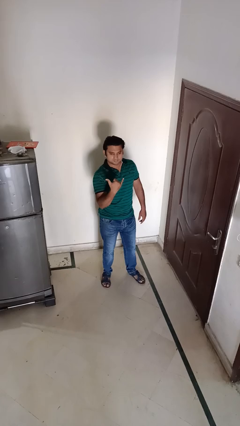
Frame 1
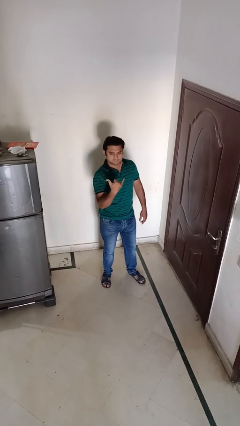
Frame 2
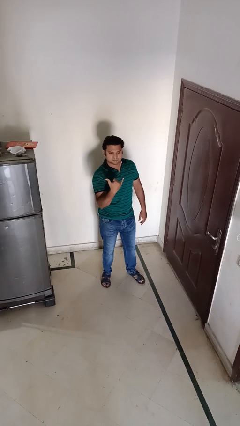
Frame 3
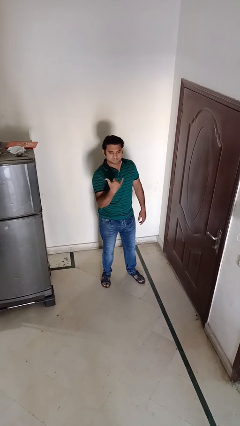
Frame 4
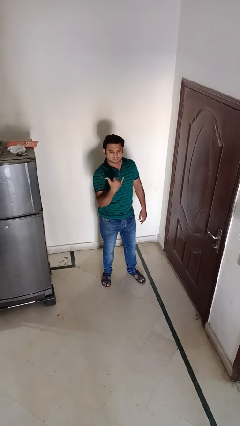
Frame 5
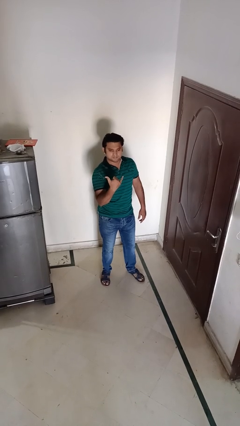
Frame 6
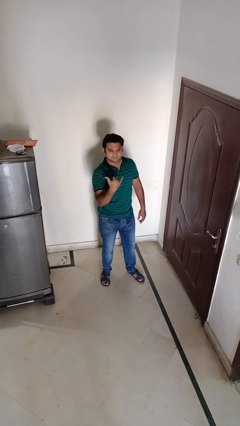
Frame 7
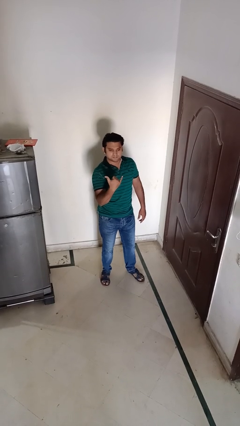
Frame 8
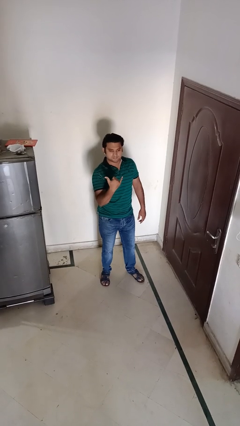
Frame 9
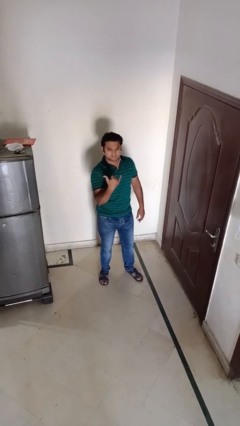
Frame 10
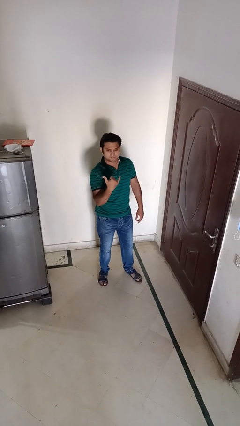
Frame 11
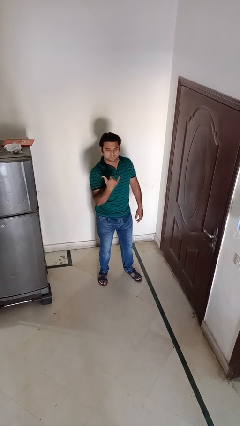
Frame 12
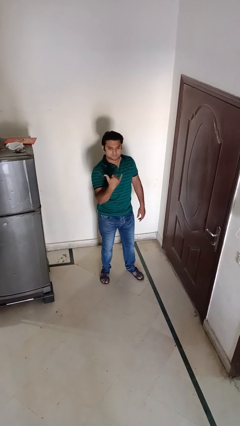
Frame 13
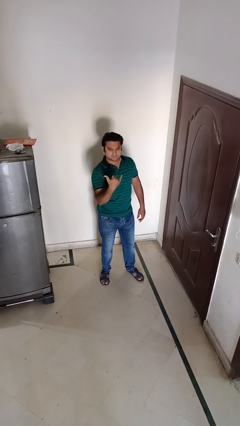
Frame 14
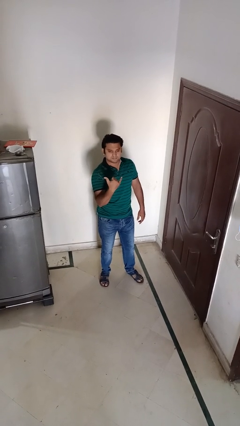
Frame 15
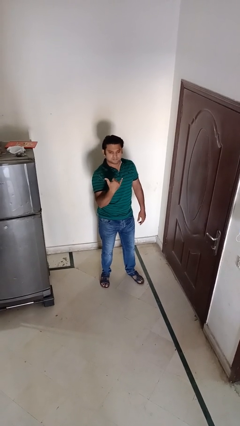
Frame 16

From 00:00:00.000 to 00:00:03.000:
person gestures hang loose

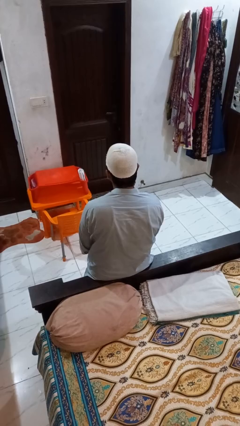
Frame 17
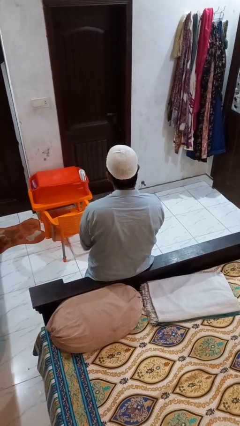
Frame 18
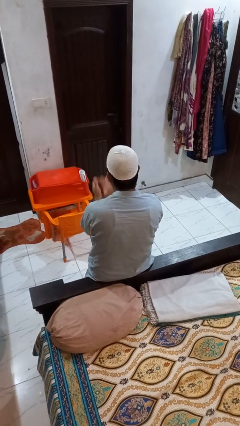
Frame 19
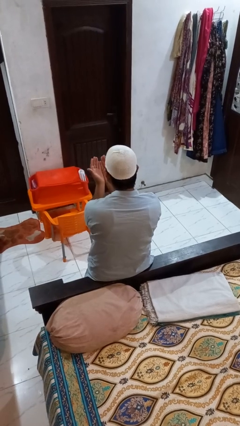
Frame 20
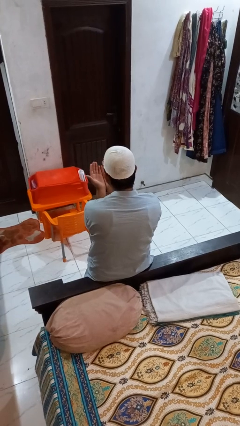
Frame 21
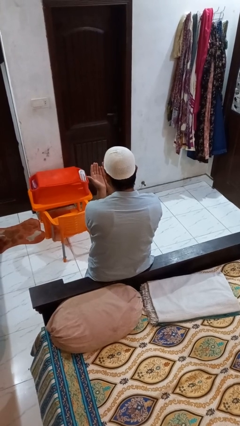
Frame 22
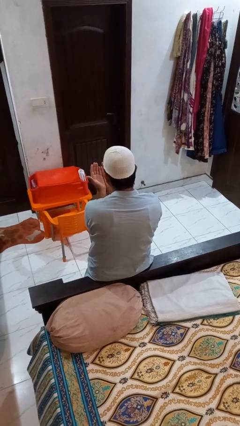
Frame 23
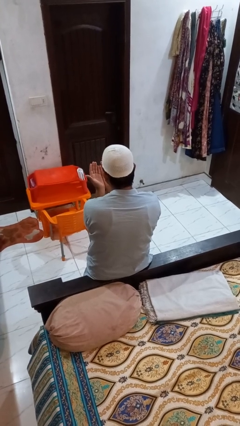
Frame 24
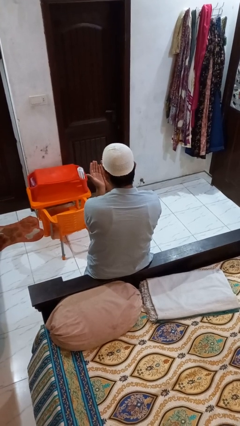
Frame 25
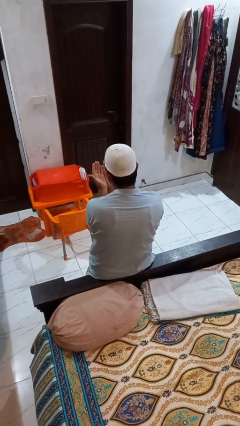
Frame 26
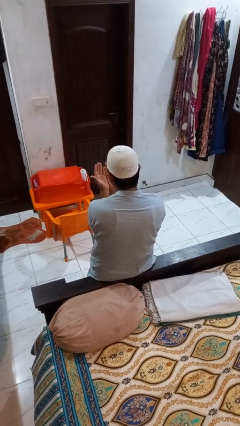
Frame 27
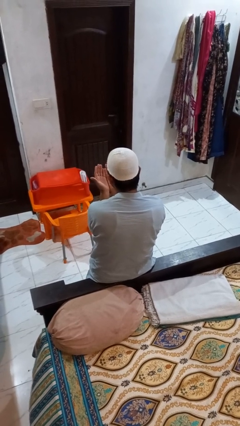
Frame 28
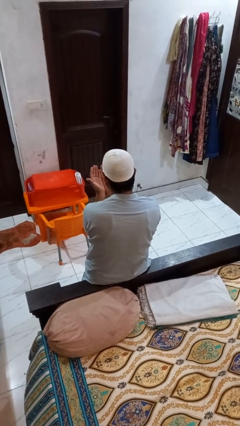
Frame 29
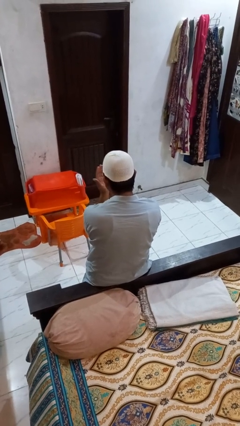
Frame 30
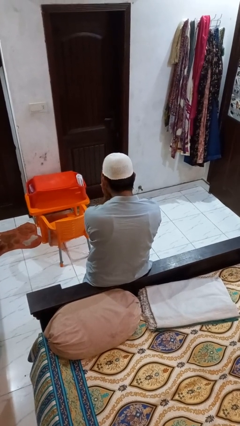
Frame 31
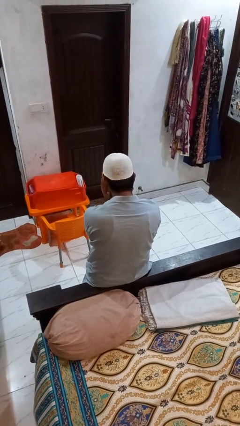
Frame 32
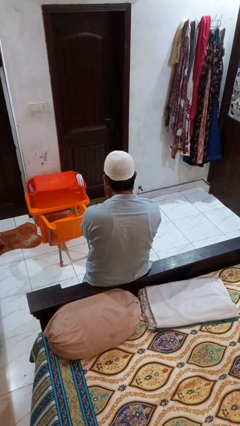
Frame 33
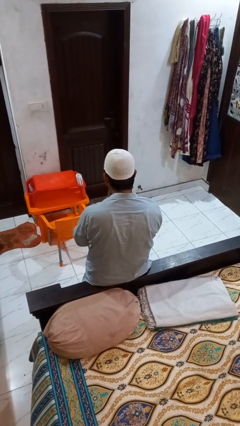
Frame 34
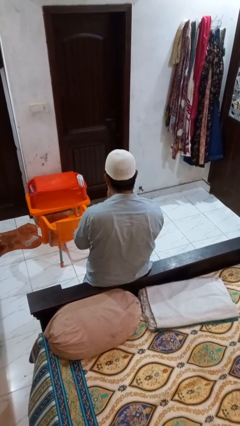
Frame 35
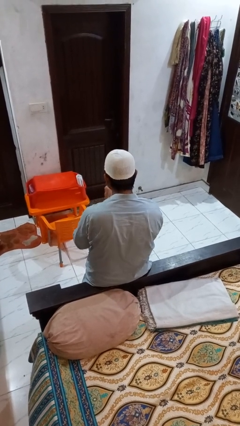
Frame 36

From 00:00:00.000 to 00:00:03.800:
person prays

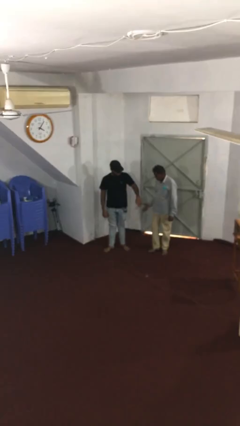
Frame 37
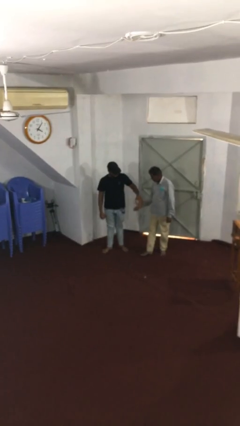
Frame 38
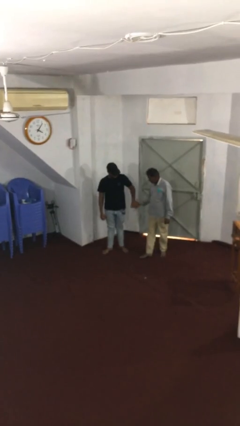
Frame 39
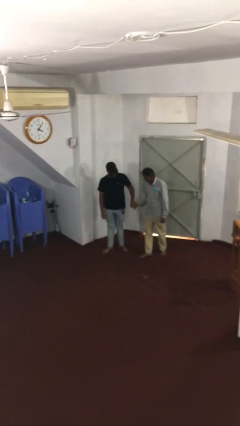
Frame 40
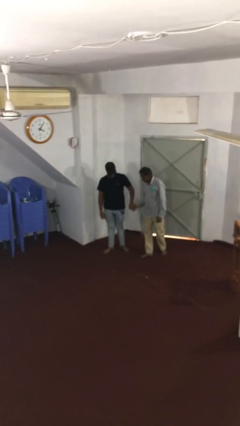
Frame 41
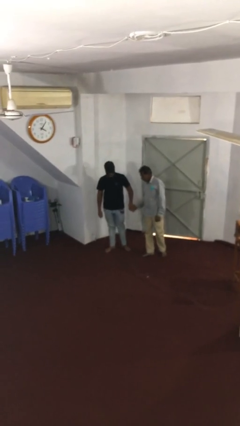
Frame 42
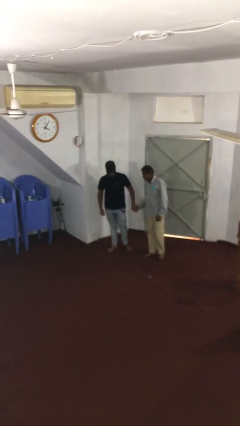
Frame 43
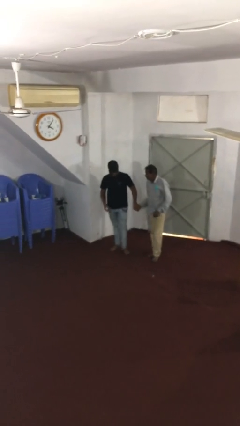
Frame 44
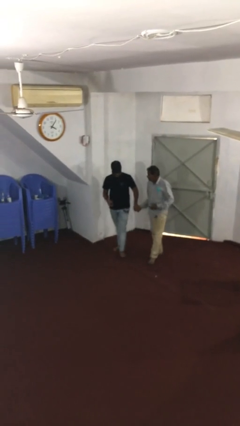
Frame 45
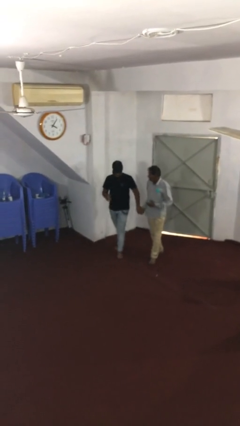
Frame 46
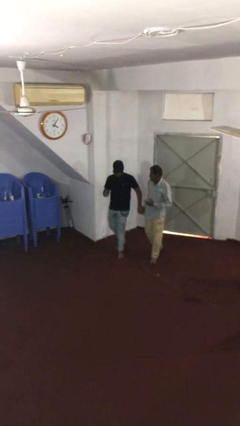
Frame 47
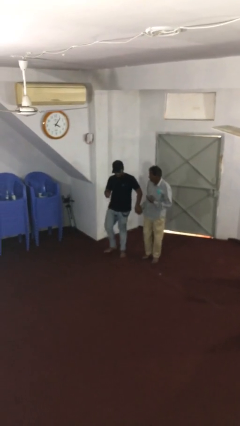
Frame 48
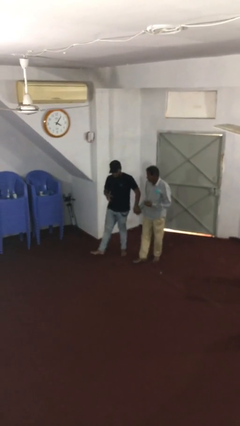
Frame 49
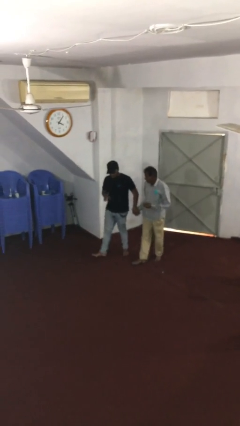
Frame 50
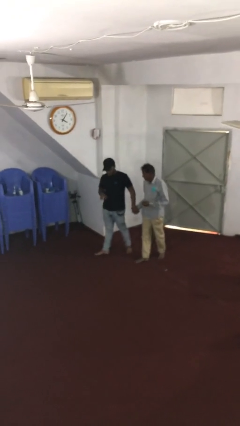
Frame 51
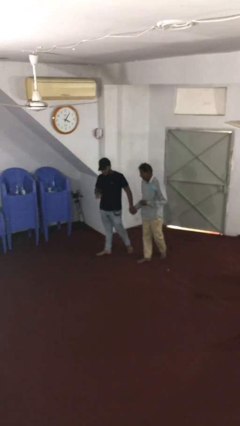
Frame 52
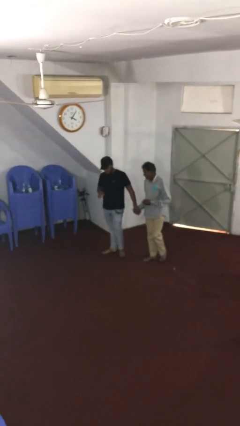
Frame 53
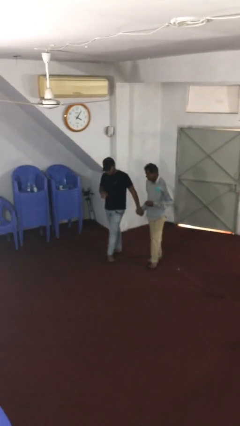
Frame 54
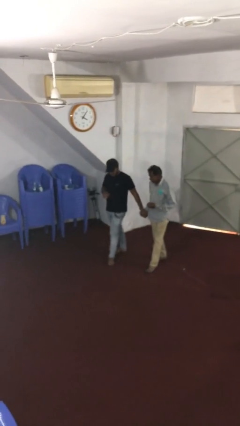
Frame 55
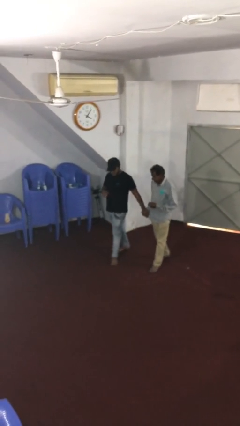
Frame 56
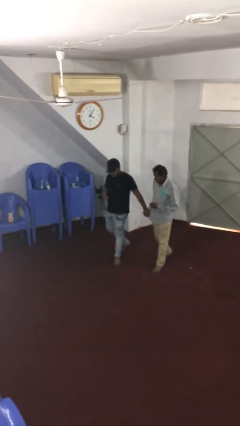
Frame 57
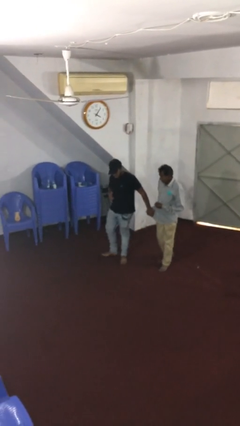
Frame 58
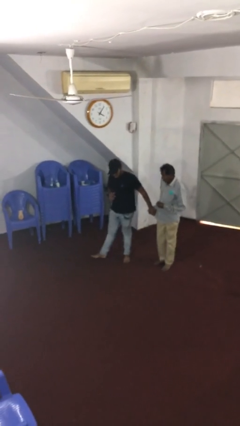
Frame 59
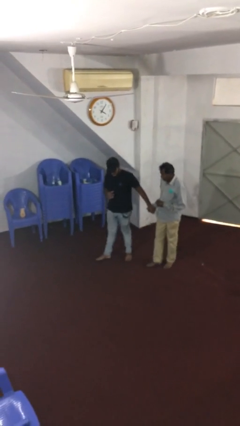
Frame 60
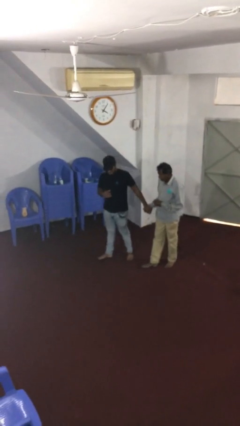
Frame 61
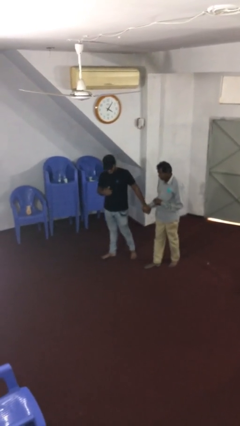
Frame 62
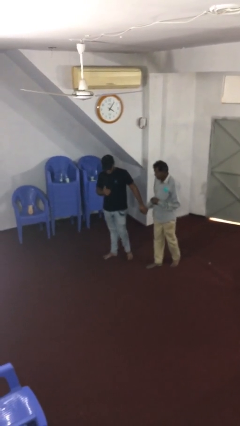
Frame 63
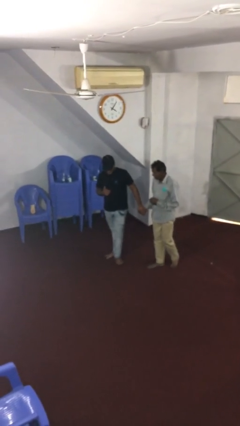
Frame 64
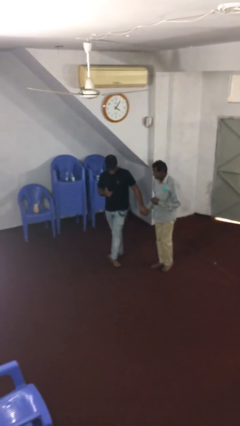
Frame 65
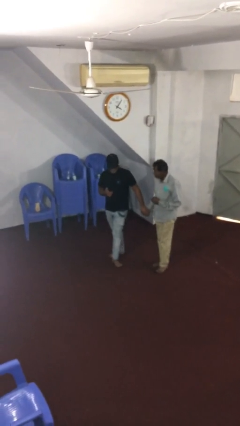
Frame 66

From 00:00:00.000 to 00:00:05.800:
person holds hand

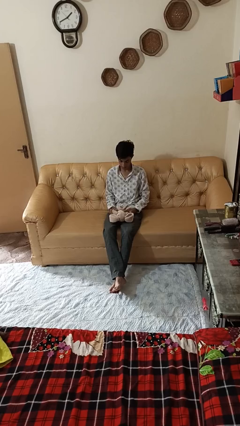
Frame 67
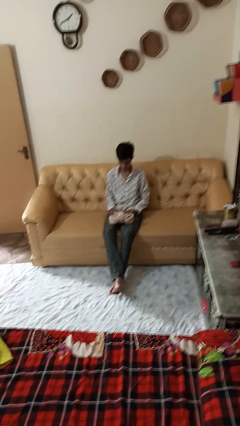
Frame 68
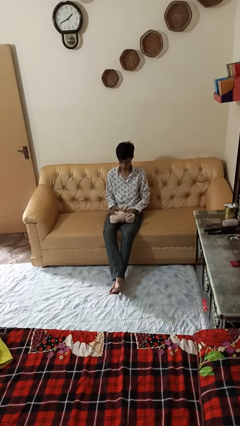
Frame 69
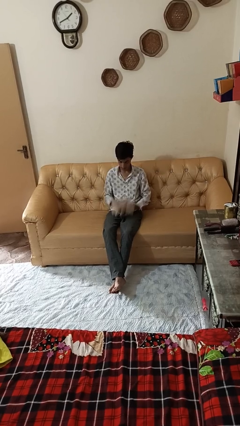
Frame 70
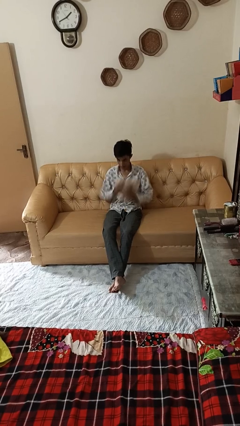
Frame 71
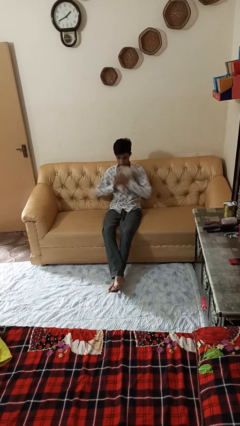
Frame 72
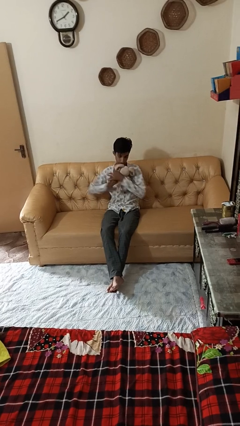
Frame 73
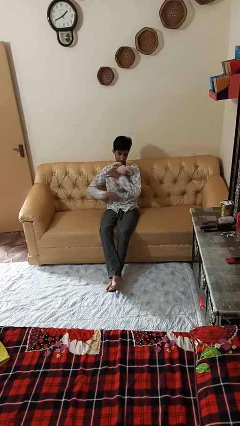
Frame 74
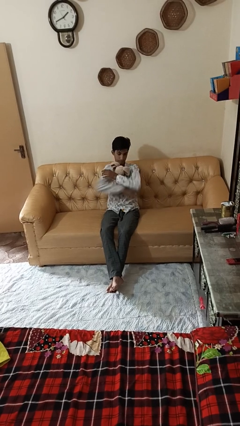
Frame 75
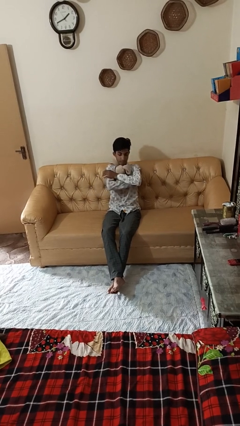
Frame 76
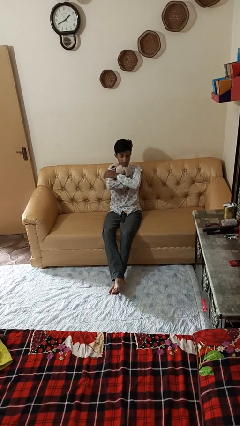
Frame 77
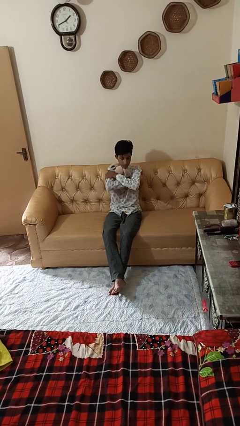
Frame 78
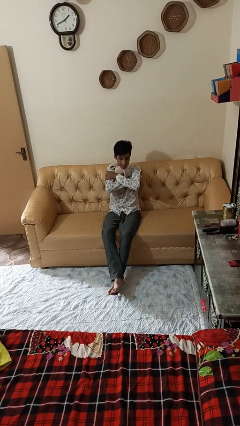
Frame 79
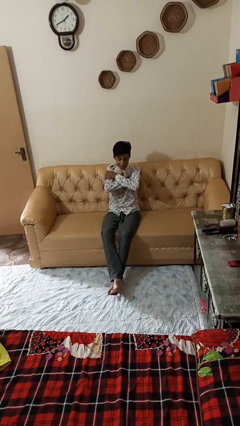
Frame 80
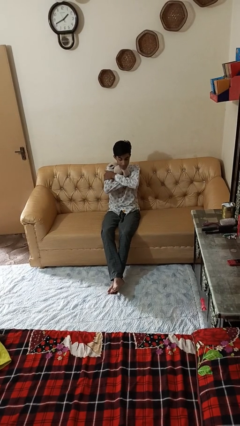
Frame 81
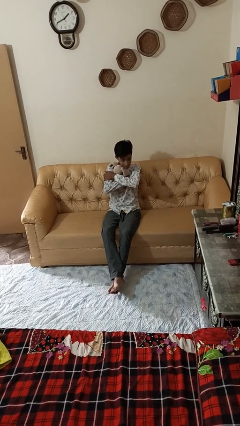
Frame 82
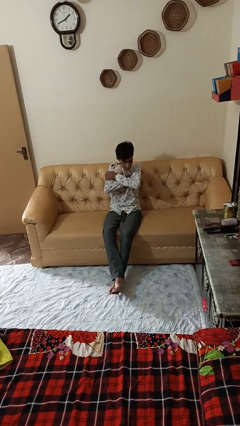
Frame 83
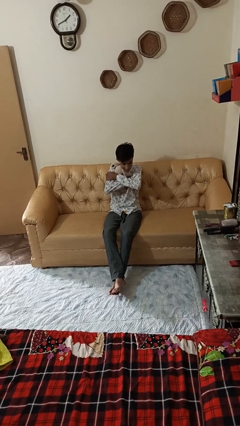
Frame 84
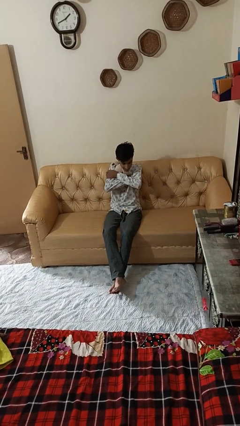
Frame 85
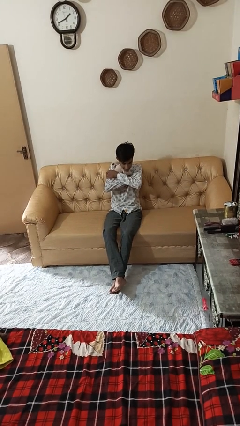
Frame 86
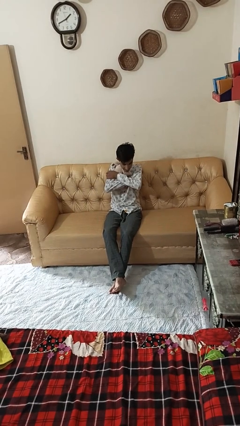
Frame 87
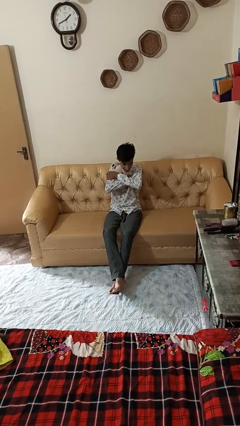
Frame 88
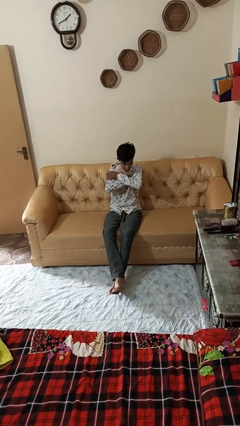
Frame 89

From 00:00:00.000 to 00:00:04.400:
person hugs stuffed animal

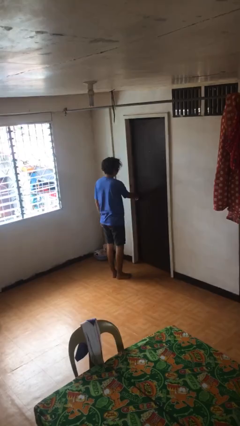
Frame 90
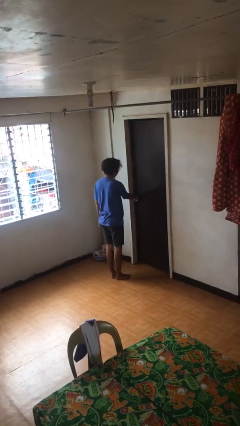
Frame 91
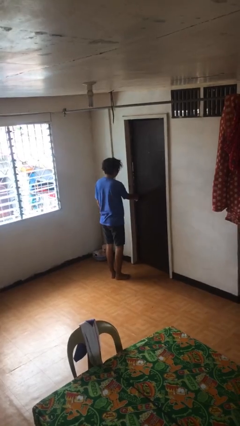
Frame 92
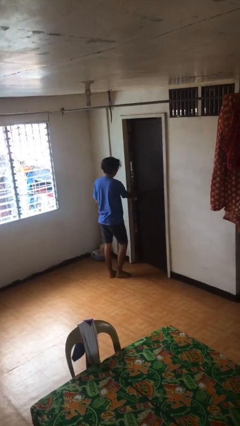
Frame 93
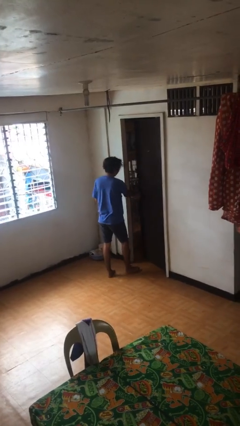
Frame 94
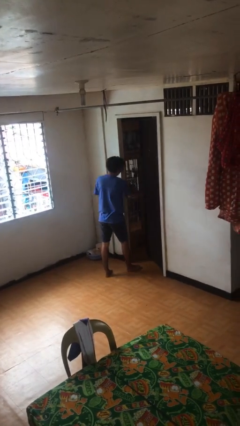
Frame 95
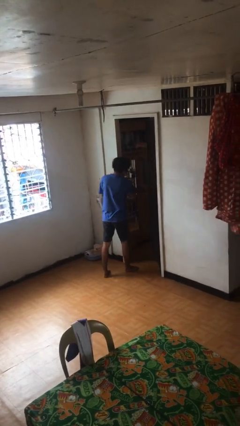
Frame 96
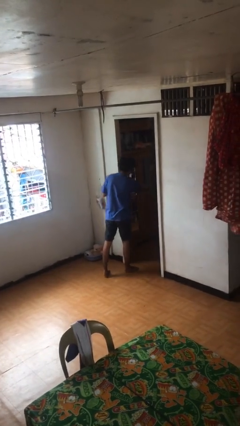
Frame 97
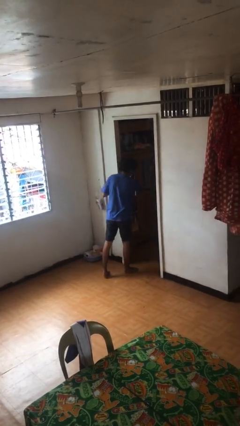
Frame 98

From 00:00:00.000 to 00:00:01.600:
person opens facility door
